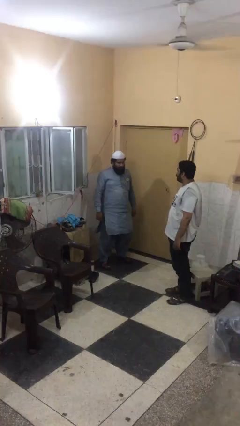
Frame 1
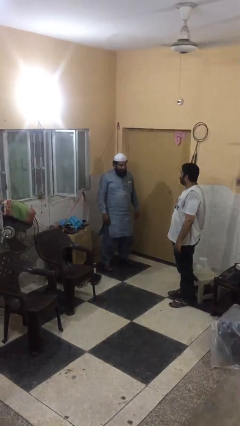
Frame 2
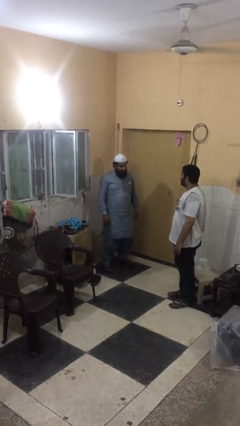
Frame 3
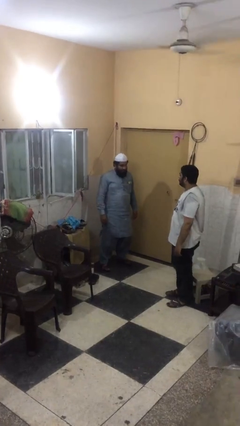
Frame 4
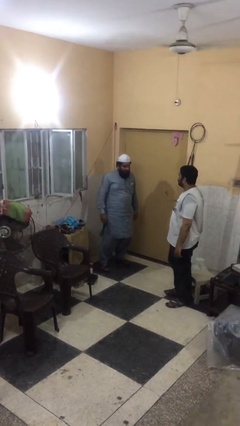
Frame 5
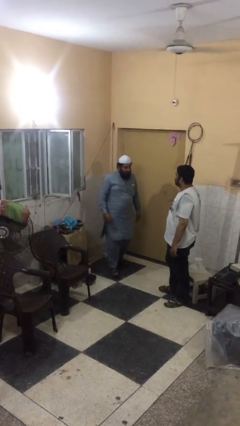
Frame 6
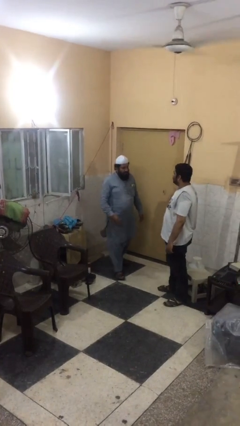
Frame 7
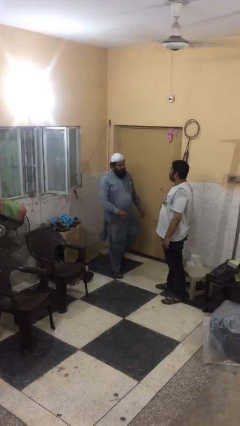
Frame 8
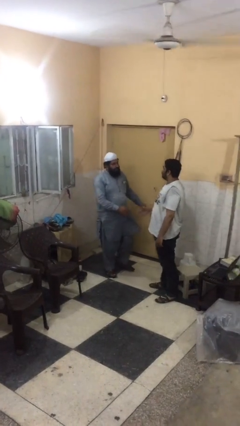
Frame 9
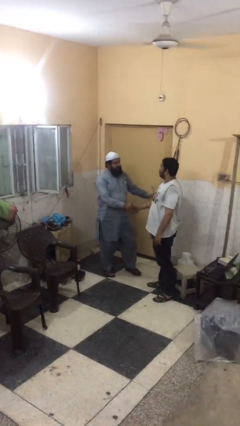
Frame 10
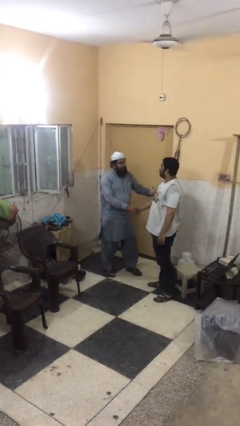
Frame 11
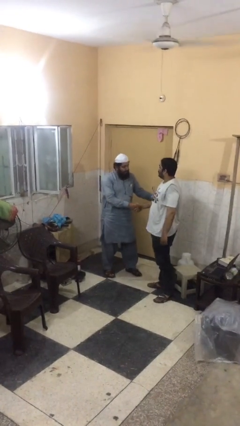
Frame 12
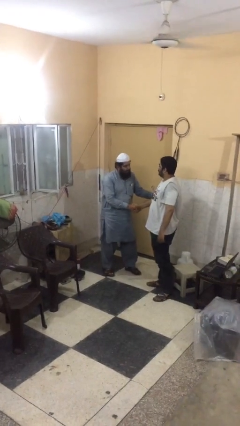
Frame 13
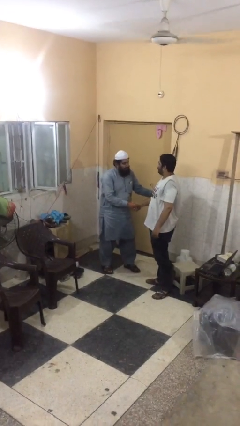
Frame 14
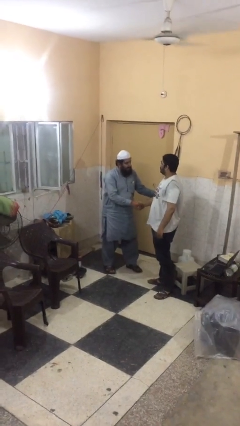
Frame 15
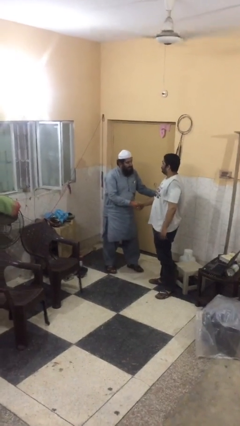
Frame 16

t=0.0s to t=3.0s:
person shakes hand

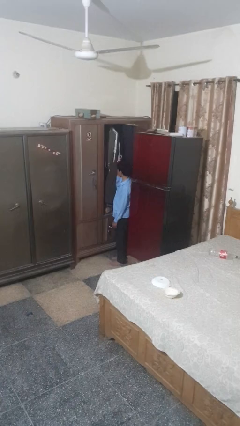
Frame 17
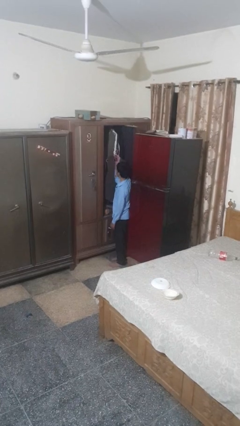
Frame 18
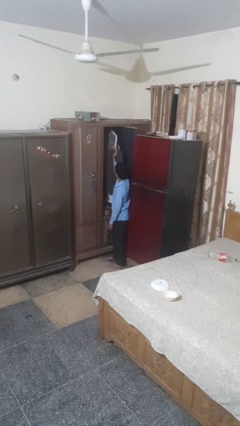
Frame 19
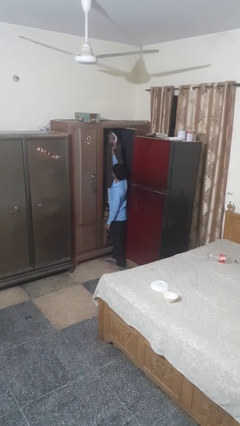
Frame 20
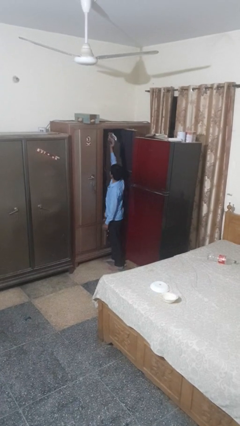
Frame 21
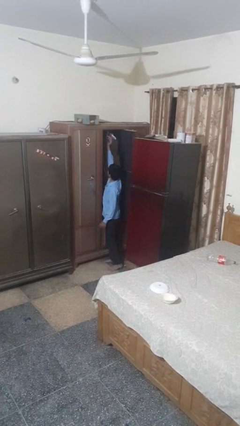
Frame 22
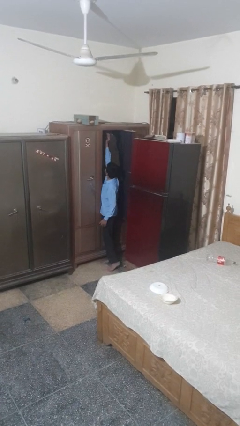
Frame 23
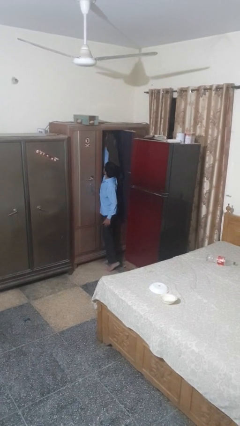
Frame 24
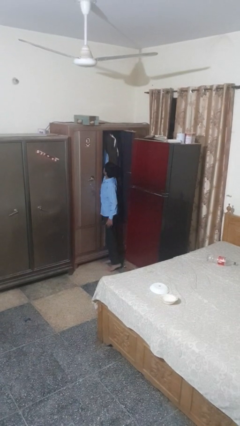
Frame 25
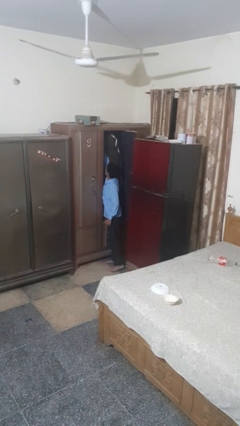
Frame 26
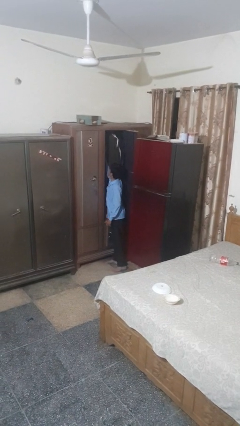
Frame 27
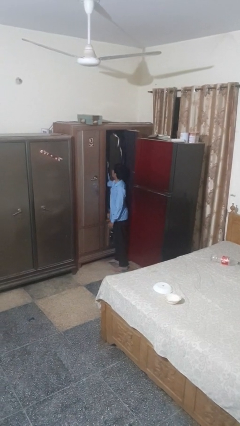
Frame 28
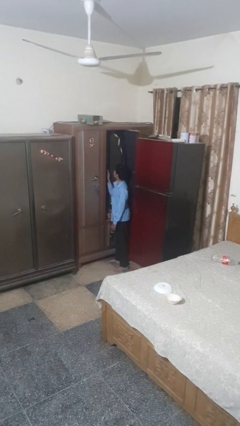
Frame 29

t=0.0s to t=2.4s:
person puts clothes into closet

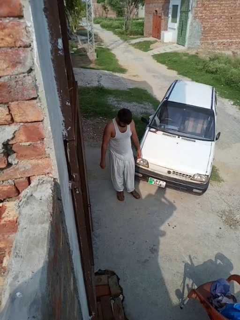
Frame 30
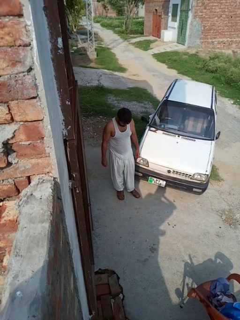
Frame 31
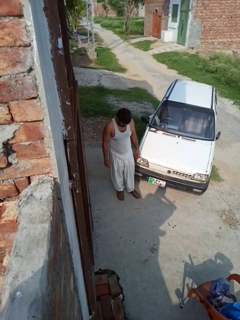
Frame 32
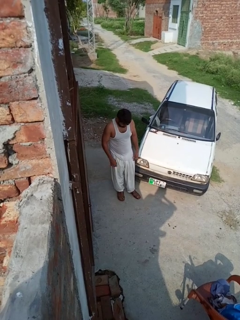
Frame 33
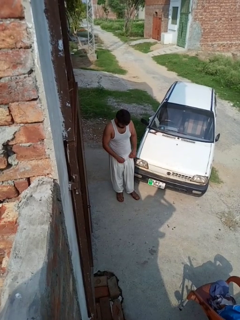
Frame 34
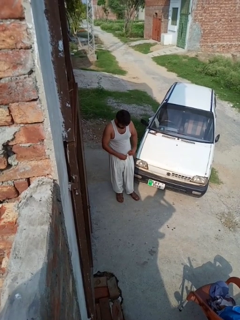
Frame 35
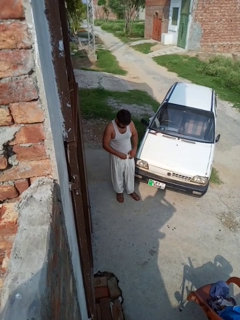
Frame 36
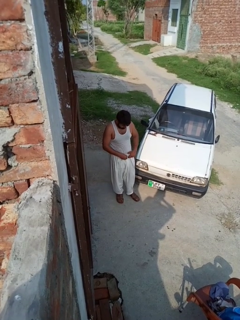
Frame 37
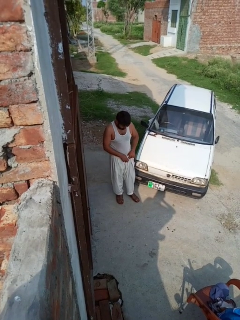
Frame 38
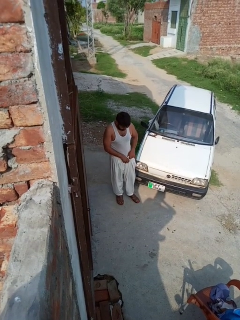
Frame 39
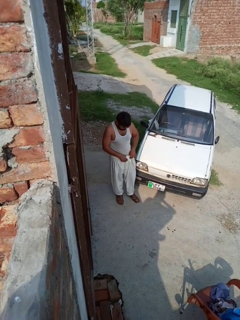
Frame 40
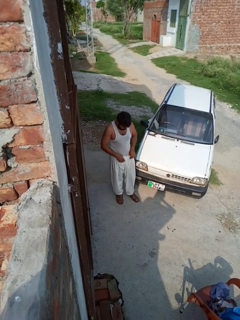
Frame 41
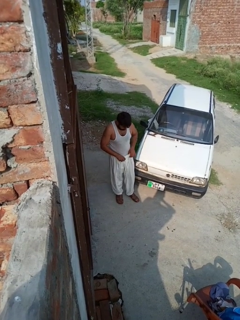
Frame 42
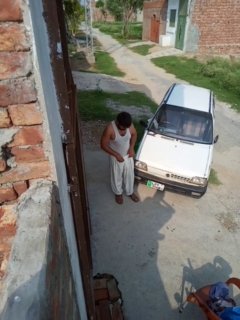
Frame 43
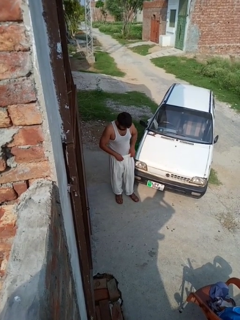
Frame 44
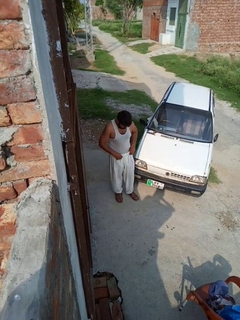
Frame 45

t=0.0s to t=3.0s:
person tucks in shirt

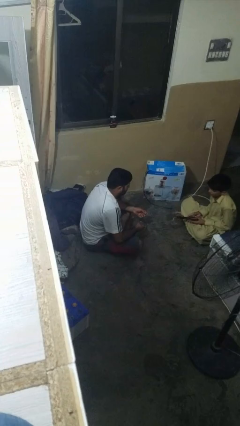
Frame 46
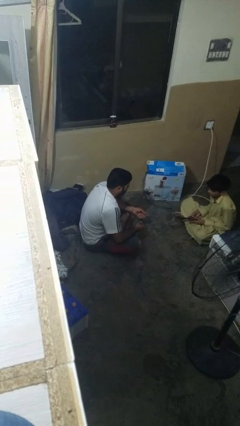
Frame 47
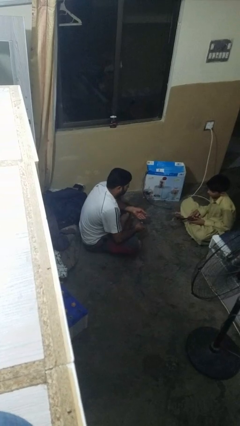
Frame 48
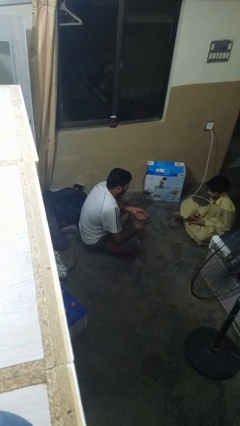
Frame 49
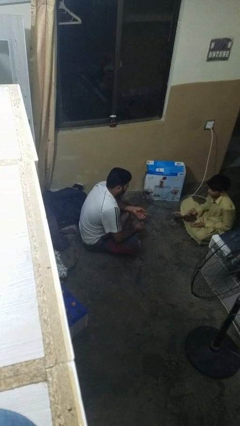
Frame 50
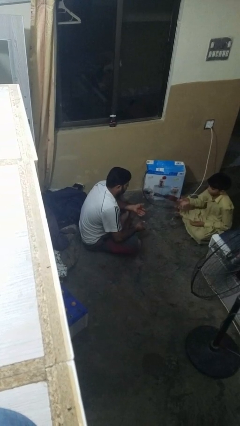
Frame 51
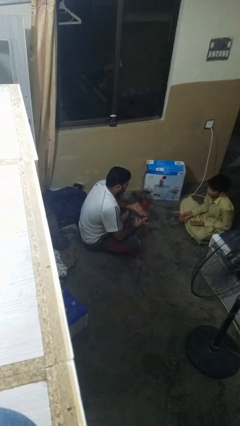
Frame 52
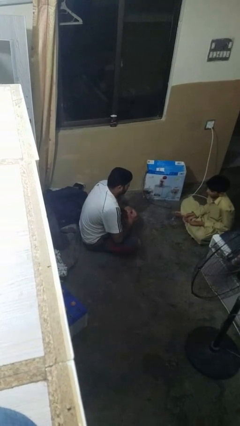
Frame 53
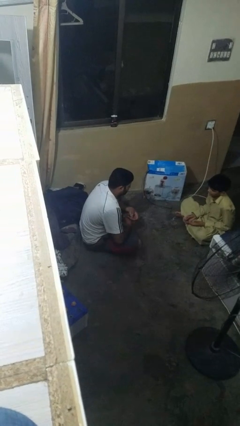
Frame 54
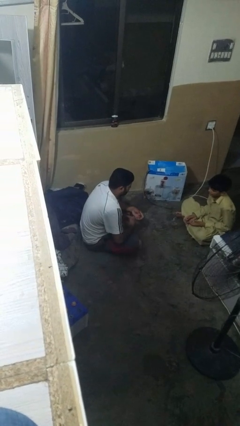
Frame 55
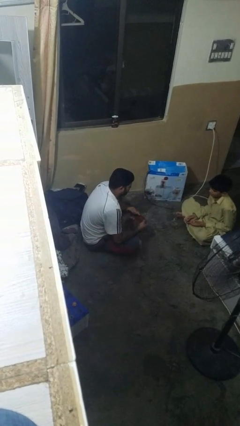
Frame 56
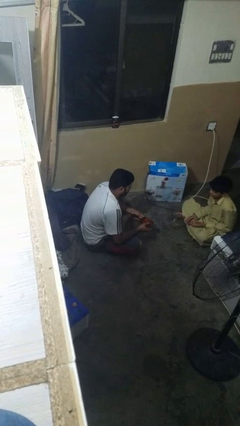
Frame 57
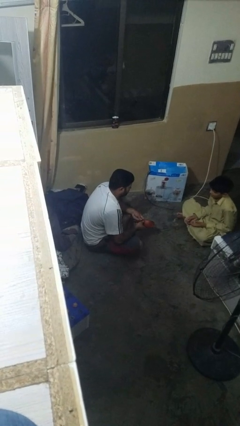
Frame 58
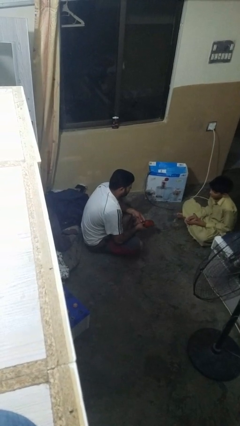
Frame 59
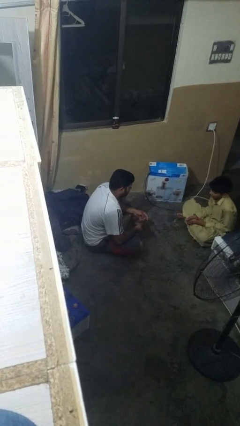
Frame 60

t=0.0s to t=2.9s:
person catches object from person

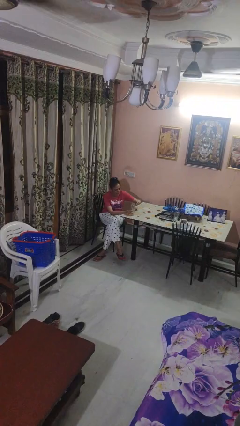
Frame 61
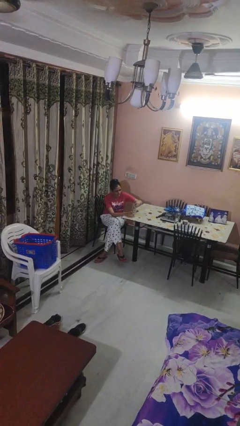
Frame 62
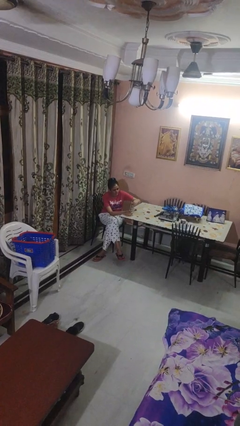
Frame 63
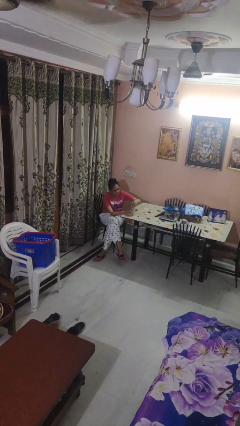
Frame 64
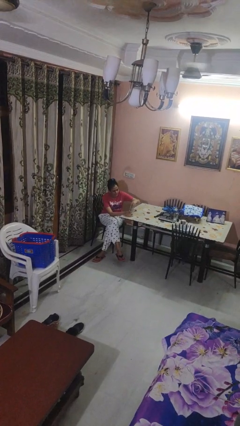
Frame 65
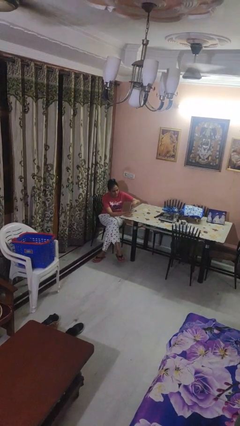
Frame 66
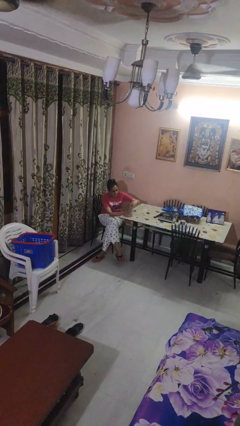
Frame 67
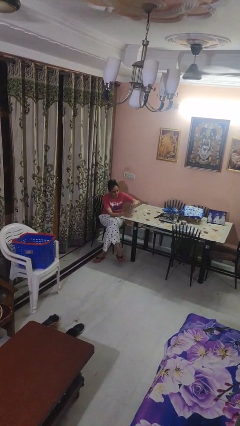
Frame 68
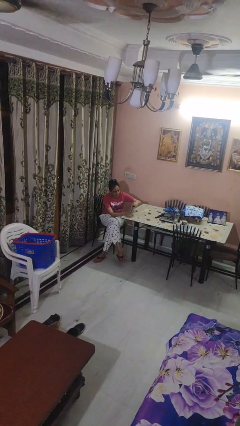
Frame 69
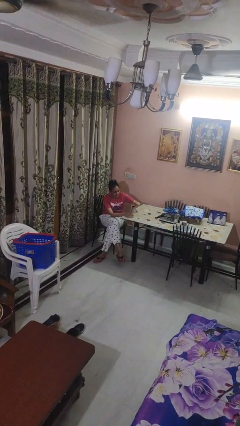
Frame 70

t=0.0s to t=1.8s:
person screws lid to bottle

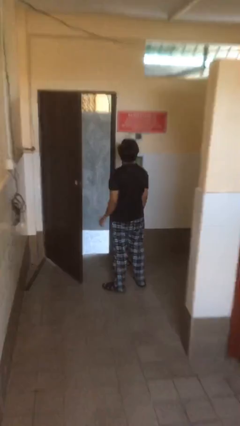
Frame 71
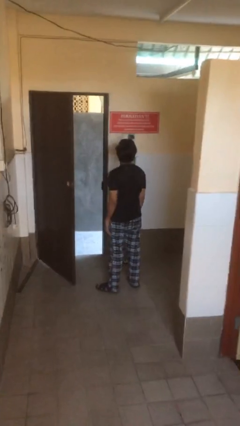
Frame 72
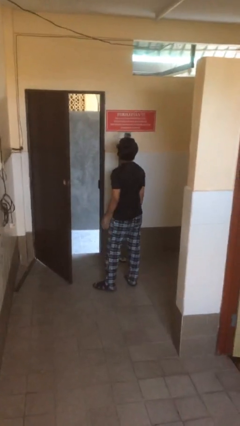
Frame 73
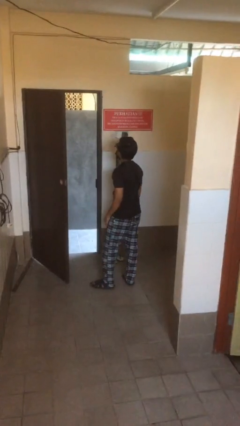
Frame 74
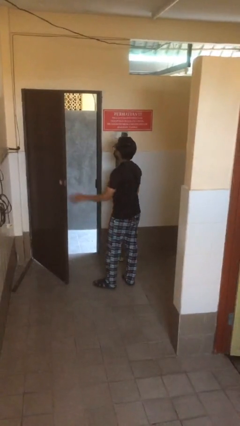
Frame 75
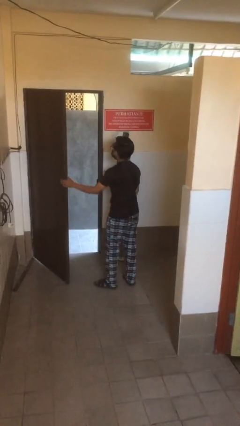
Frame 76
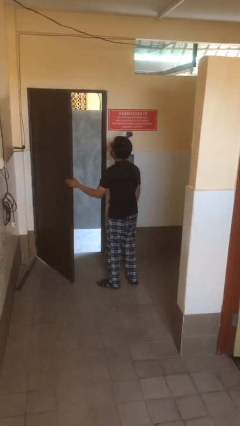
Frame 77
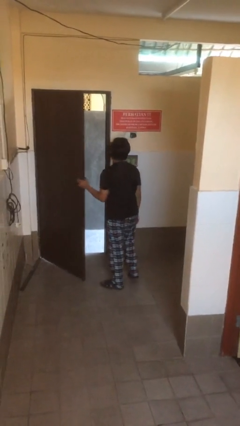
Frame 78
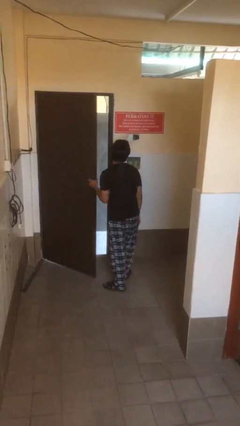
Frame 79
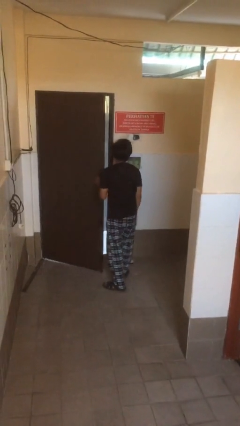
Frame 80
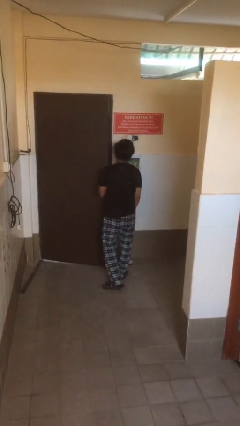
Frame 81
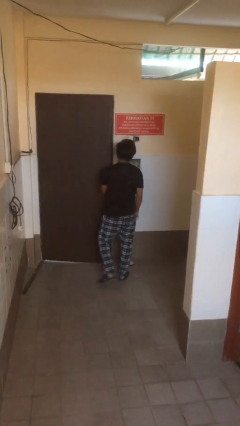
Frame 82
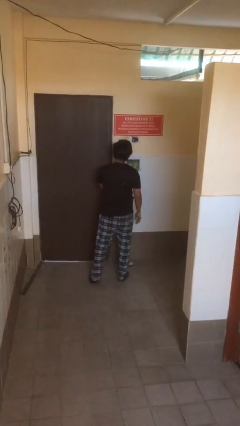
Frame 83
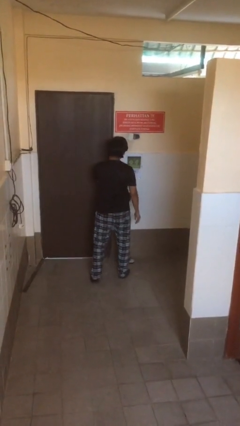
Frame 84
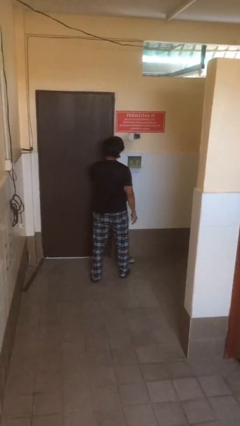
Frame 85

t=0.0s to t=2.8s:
person closes facility door

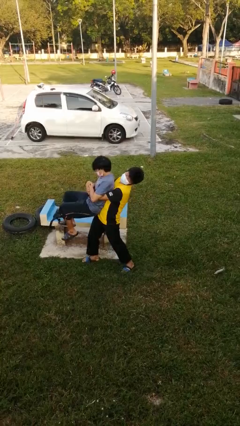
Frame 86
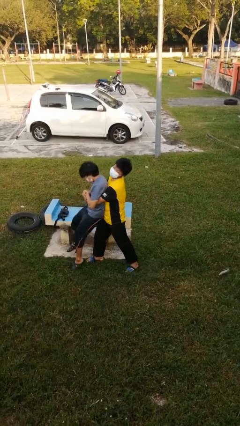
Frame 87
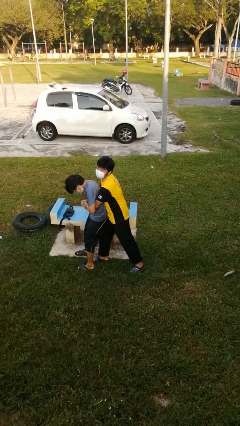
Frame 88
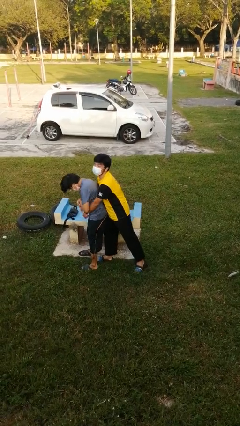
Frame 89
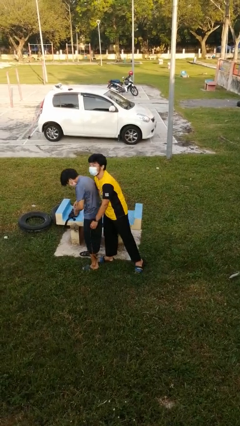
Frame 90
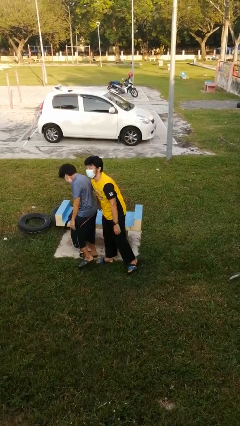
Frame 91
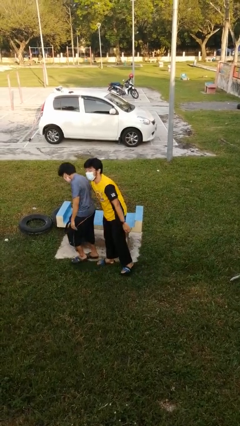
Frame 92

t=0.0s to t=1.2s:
person puts down person

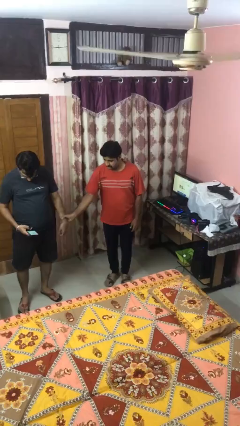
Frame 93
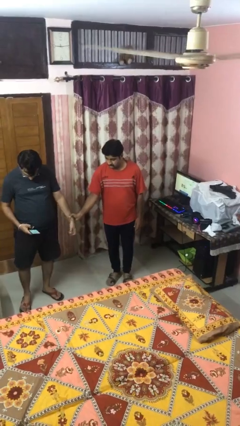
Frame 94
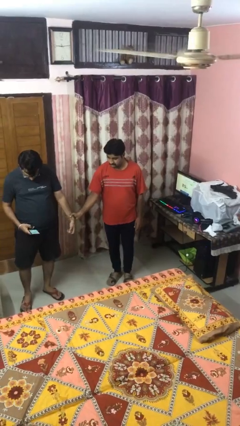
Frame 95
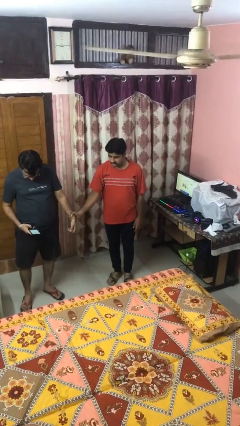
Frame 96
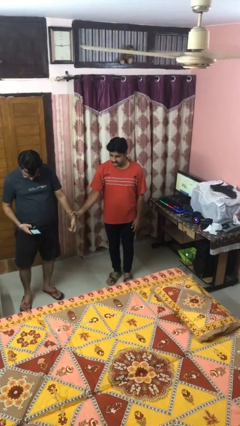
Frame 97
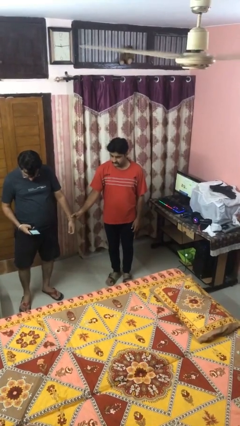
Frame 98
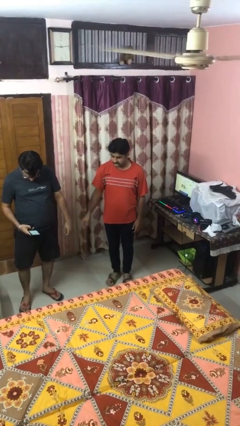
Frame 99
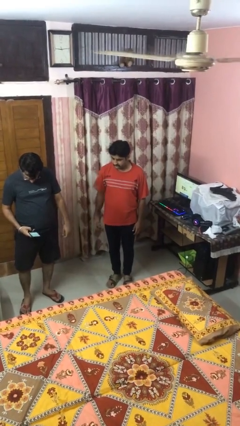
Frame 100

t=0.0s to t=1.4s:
person grabs person by forearm
